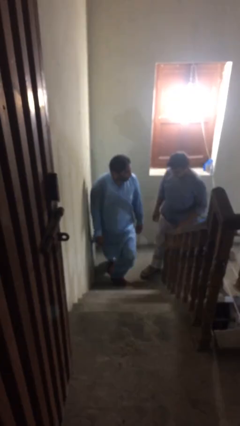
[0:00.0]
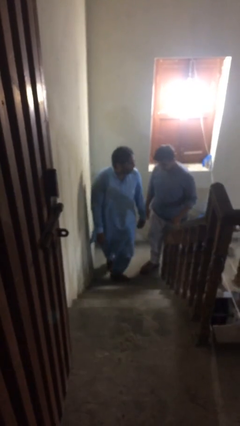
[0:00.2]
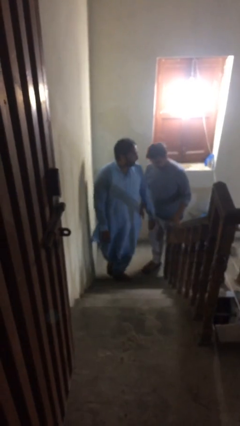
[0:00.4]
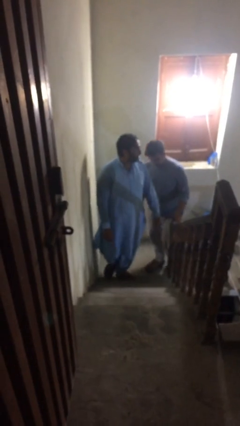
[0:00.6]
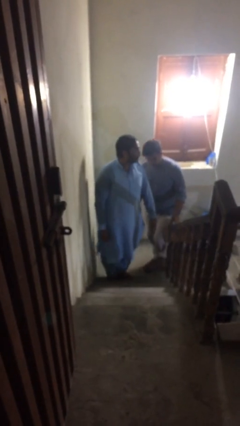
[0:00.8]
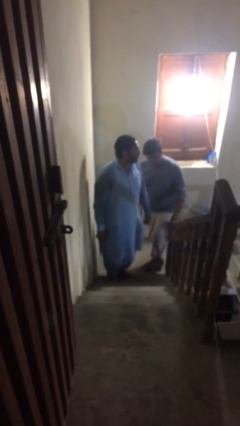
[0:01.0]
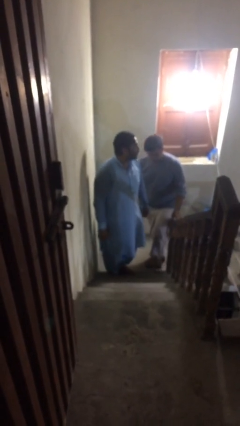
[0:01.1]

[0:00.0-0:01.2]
person talks to person

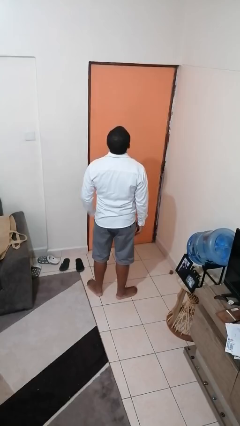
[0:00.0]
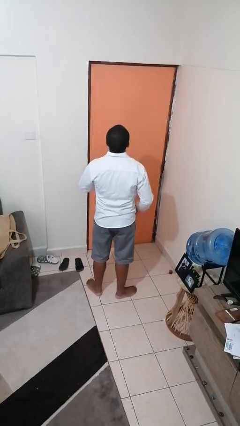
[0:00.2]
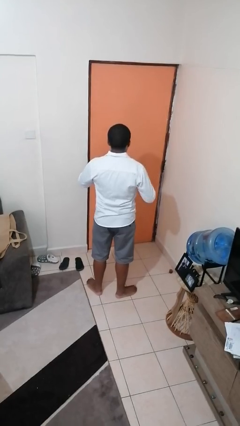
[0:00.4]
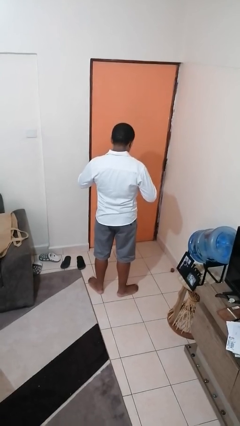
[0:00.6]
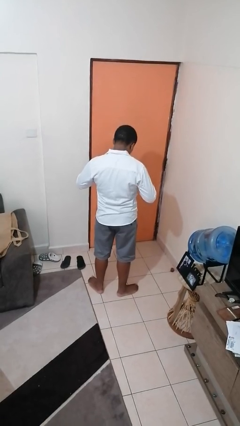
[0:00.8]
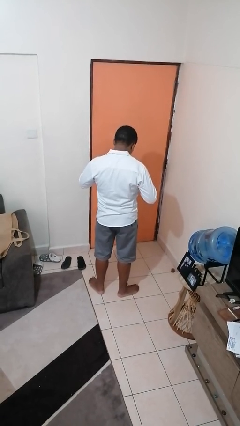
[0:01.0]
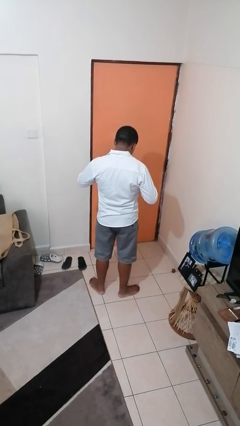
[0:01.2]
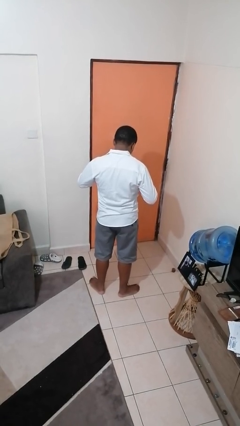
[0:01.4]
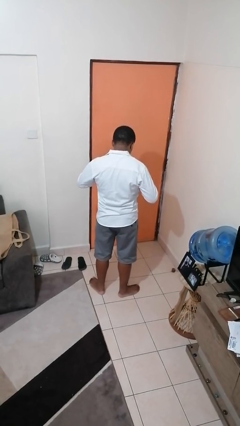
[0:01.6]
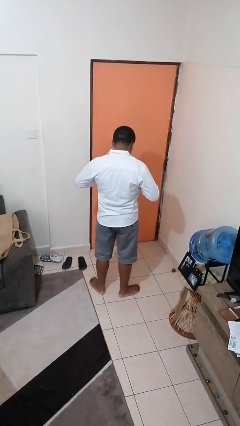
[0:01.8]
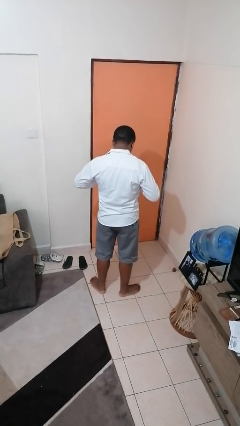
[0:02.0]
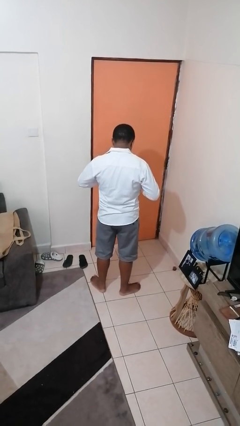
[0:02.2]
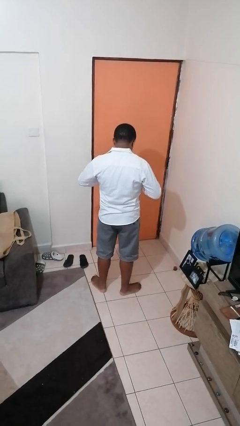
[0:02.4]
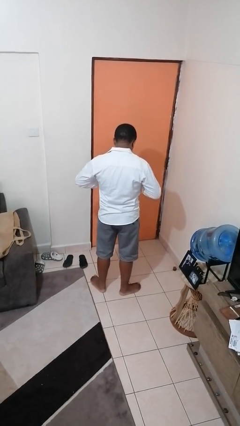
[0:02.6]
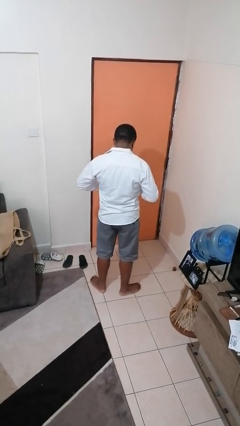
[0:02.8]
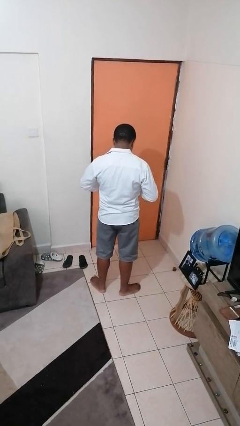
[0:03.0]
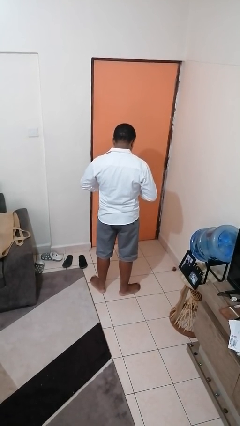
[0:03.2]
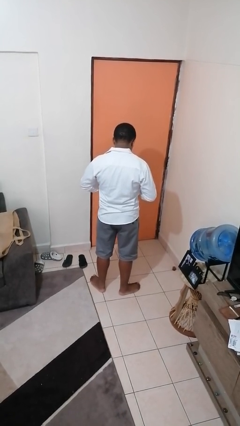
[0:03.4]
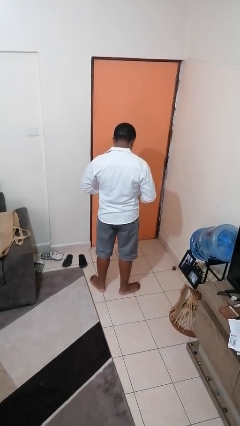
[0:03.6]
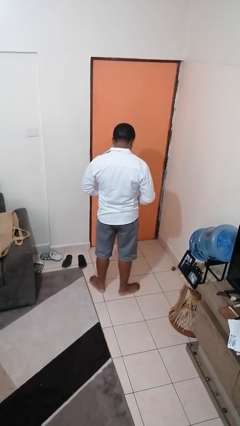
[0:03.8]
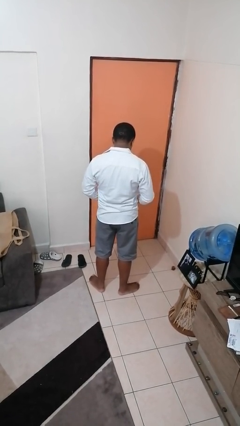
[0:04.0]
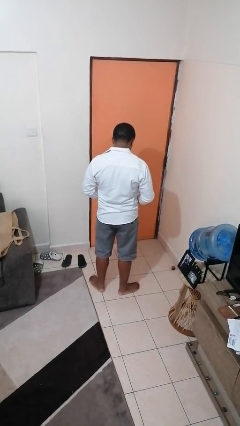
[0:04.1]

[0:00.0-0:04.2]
person unbuttons shirt

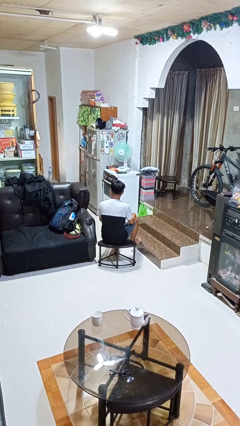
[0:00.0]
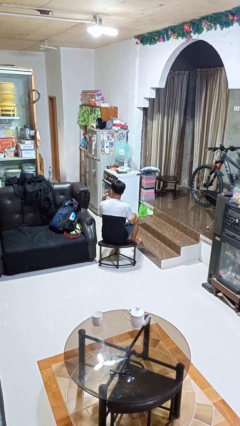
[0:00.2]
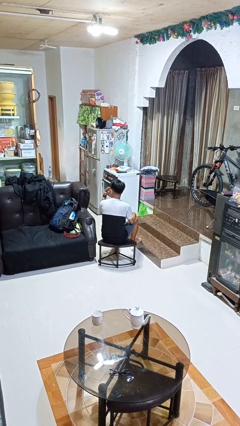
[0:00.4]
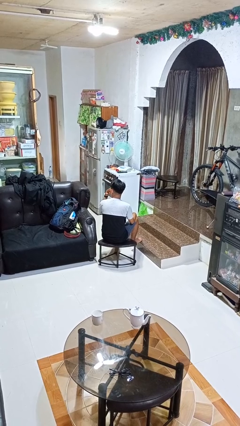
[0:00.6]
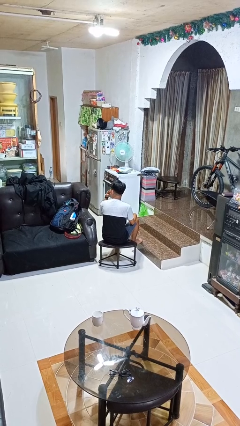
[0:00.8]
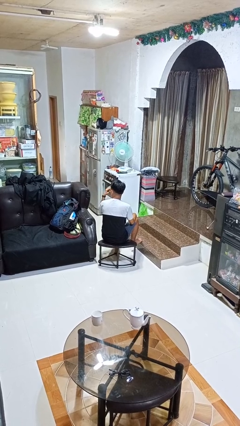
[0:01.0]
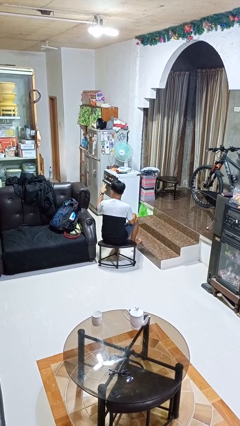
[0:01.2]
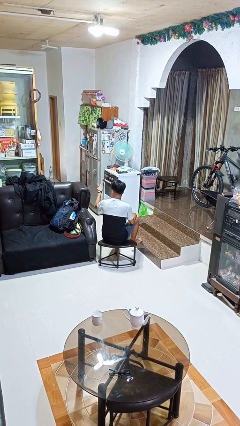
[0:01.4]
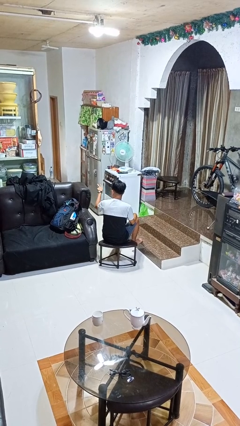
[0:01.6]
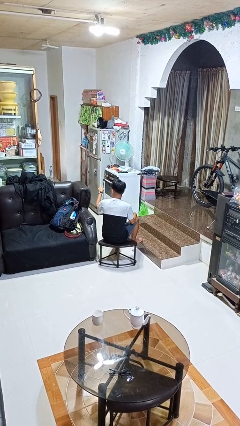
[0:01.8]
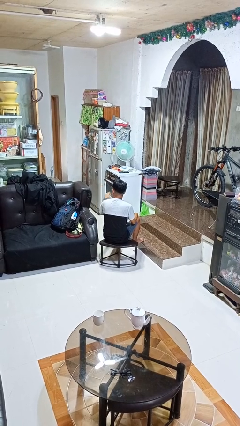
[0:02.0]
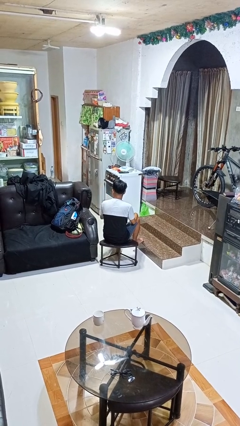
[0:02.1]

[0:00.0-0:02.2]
person gestures watch closely

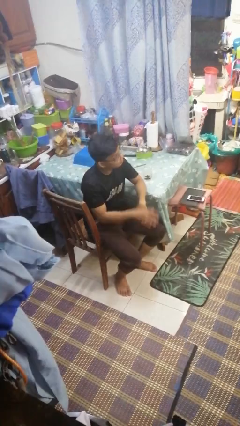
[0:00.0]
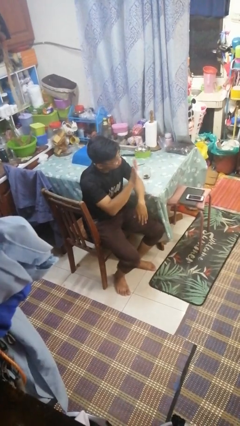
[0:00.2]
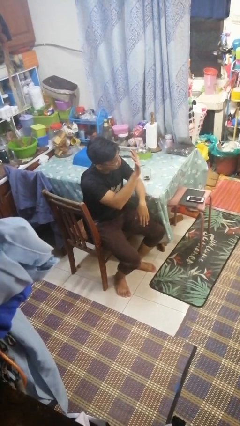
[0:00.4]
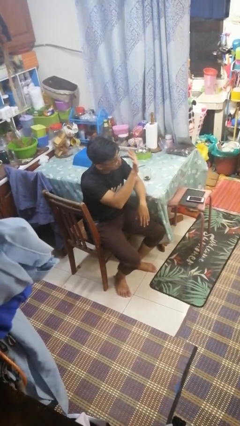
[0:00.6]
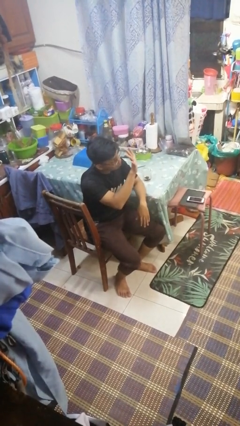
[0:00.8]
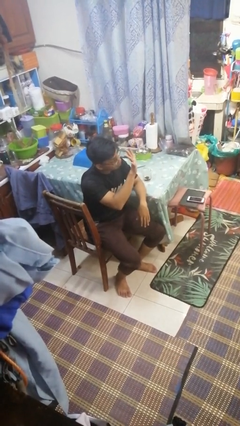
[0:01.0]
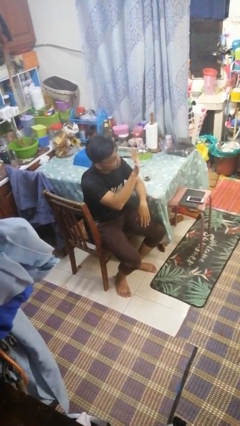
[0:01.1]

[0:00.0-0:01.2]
person gestures number five

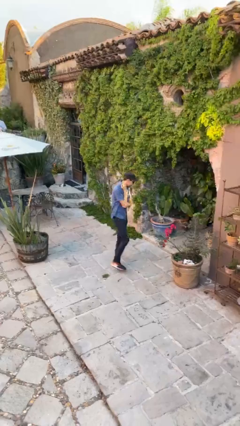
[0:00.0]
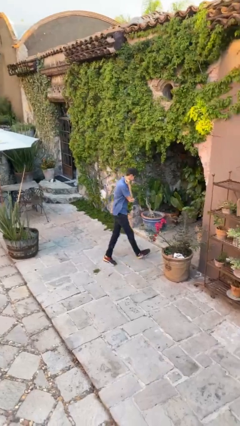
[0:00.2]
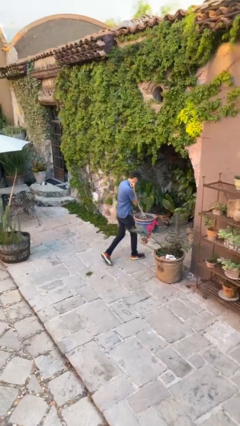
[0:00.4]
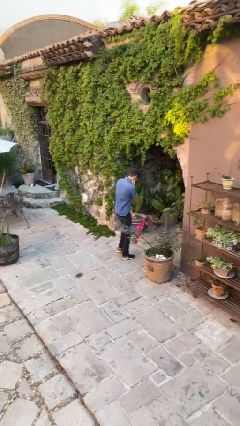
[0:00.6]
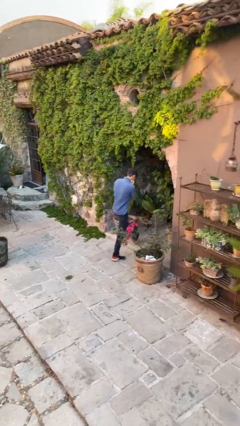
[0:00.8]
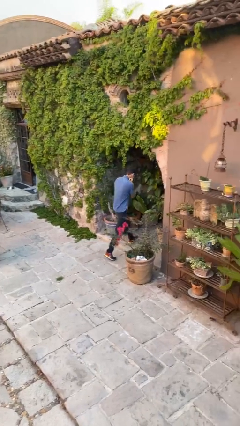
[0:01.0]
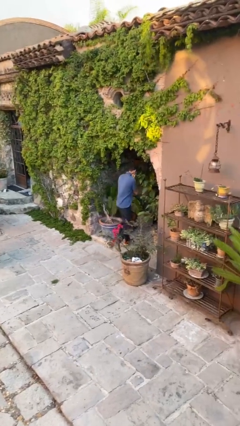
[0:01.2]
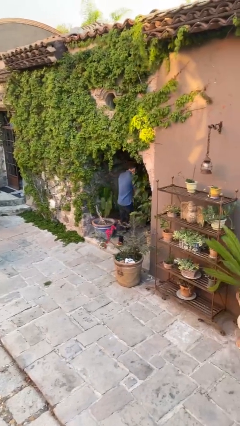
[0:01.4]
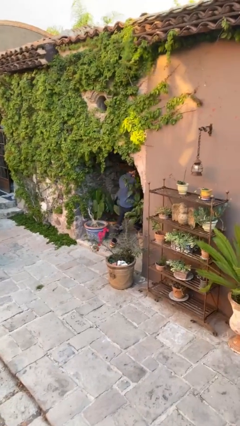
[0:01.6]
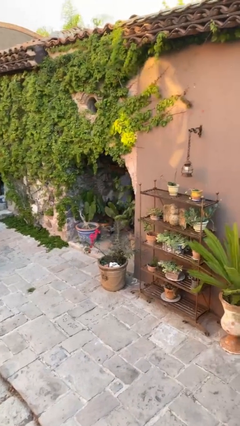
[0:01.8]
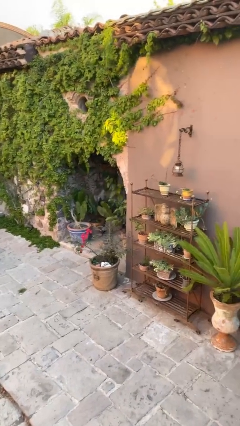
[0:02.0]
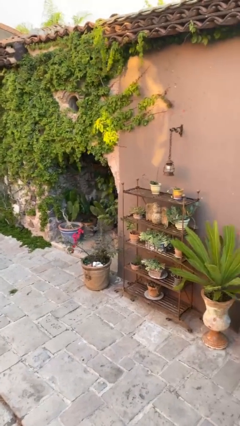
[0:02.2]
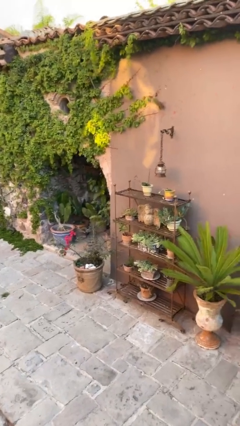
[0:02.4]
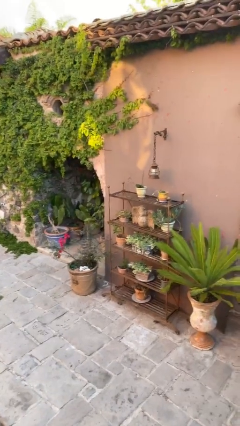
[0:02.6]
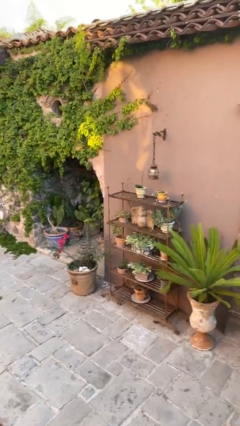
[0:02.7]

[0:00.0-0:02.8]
person exits scene through structure

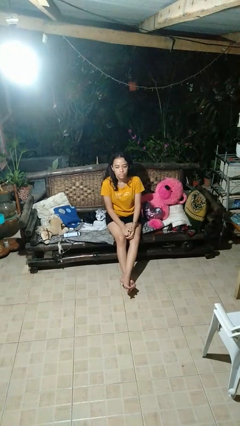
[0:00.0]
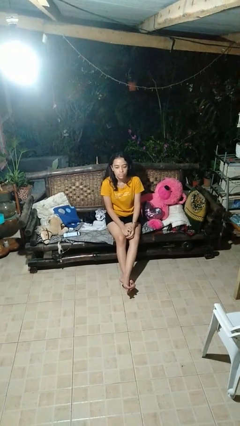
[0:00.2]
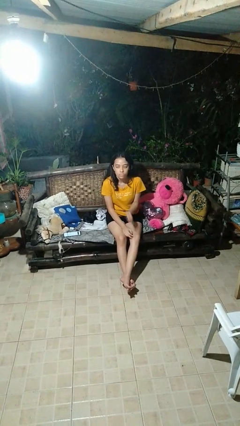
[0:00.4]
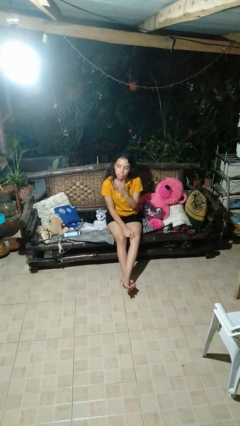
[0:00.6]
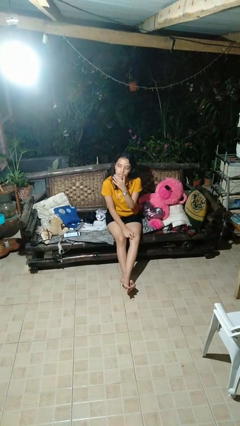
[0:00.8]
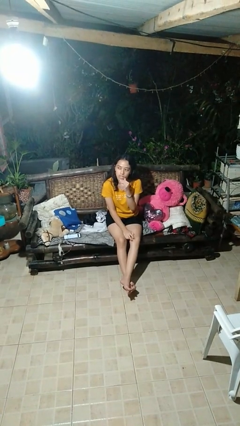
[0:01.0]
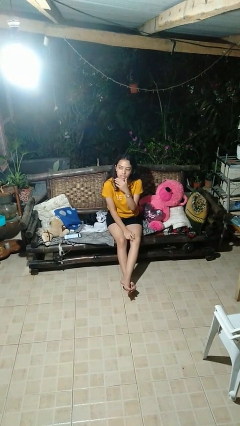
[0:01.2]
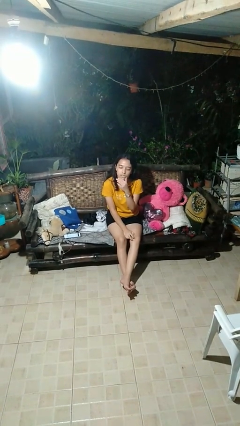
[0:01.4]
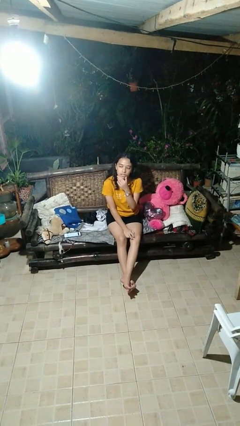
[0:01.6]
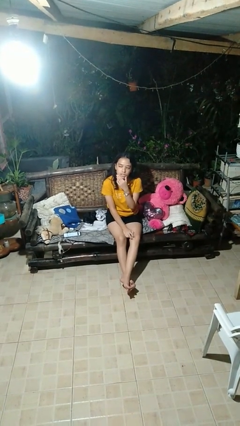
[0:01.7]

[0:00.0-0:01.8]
person strokes chin

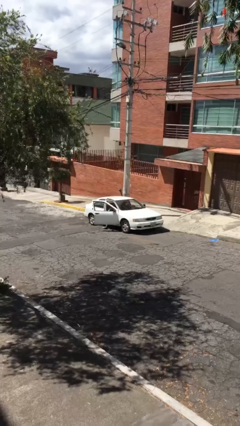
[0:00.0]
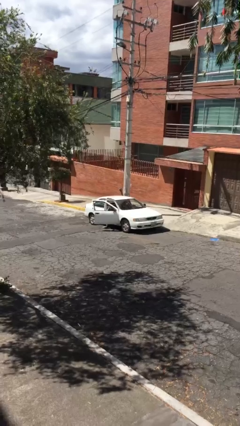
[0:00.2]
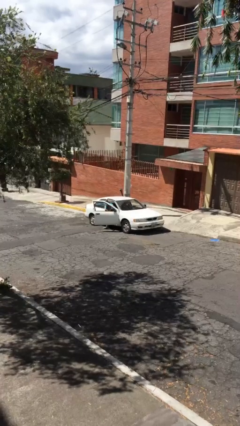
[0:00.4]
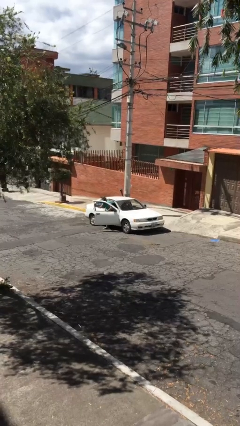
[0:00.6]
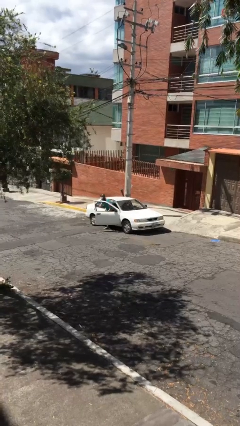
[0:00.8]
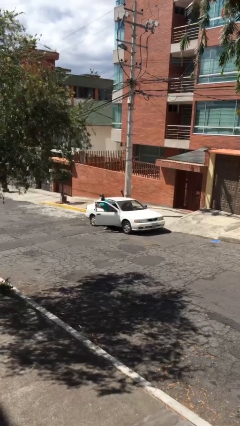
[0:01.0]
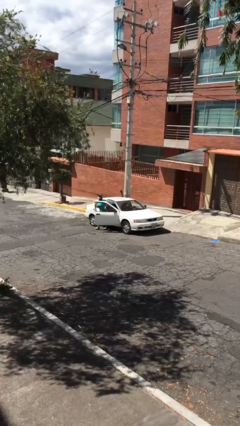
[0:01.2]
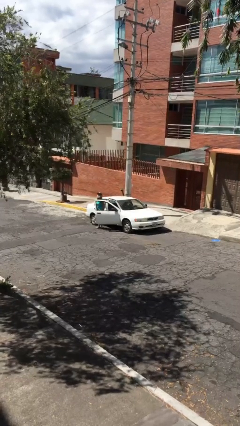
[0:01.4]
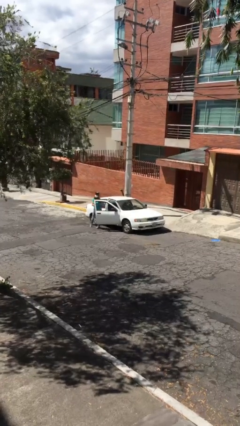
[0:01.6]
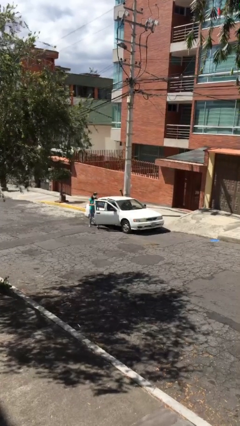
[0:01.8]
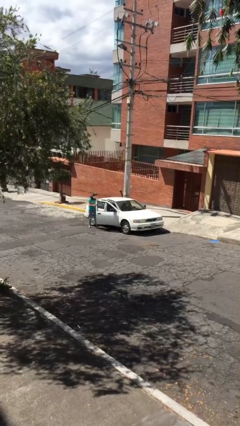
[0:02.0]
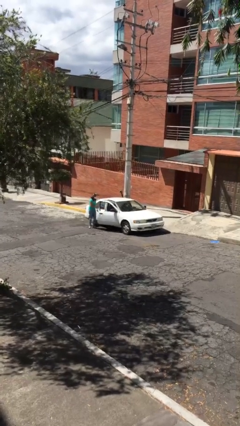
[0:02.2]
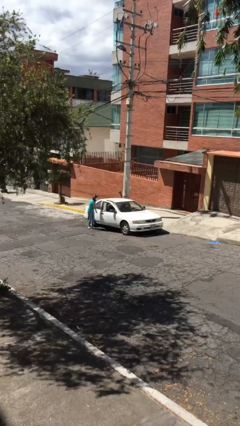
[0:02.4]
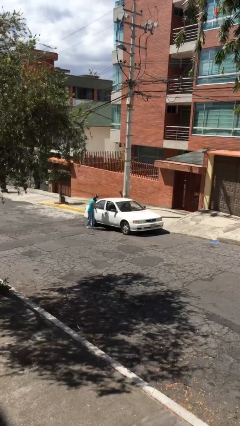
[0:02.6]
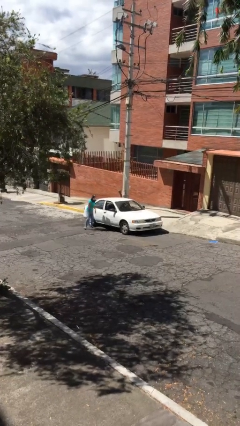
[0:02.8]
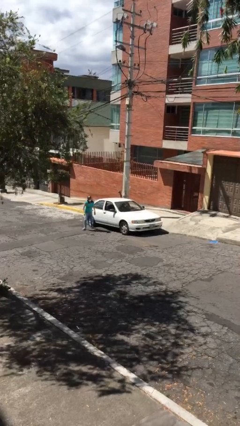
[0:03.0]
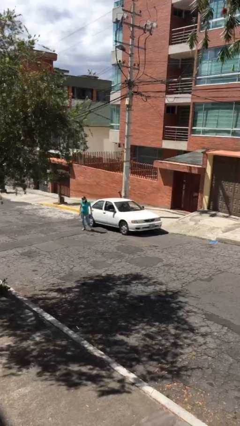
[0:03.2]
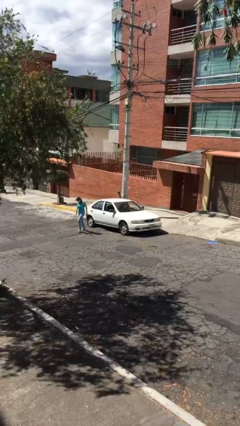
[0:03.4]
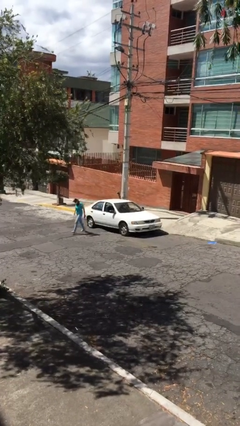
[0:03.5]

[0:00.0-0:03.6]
car drops off person
